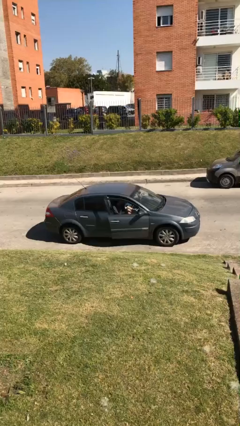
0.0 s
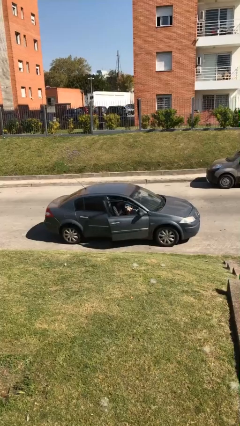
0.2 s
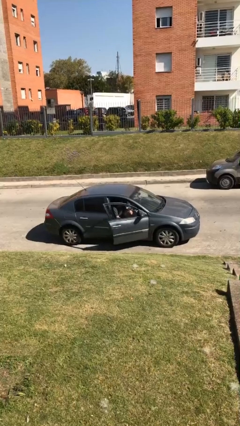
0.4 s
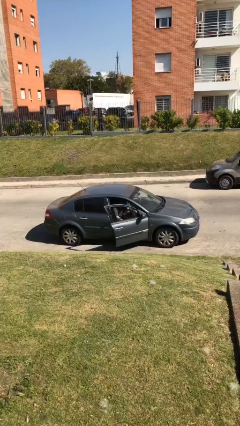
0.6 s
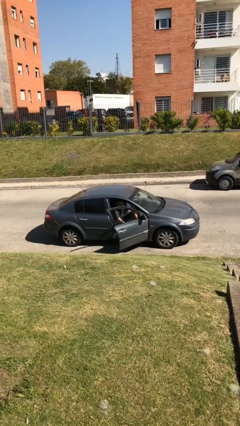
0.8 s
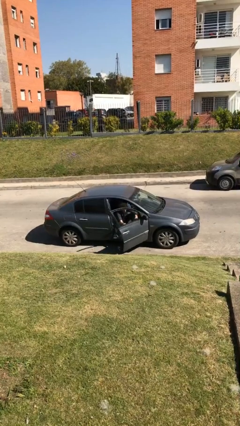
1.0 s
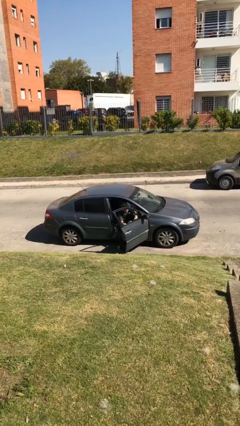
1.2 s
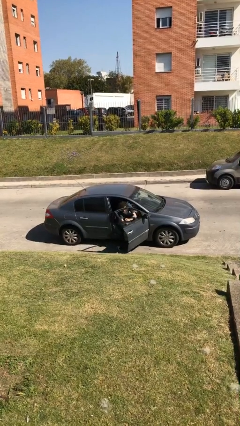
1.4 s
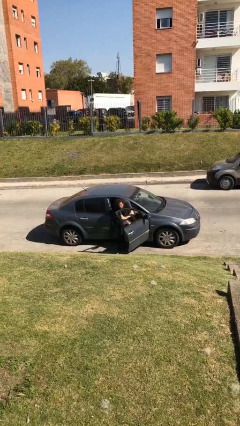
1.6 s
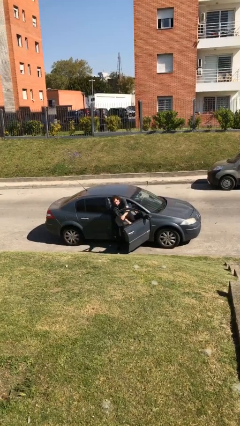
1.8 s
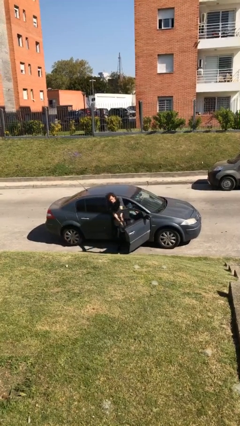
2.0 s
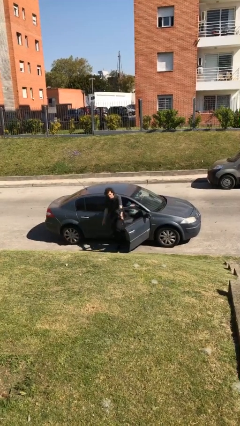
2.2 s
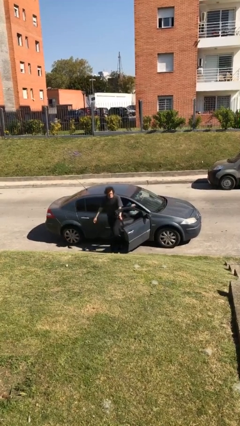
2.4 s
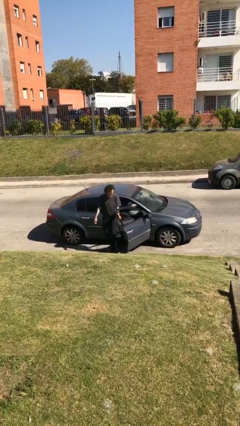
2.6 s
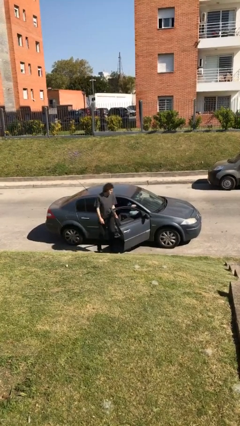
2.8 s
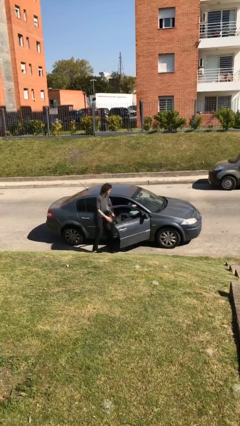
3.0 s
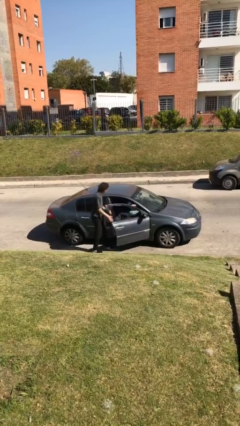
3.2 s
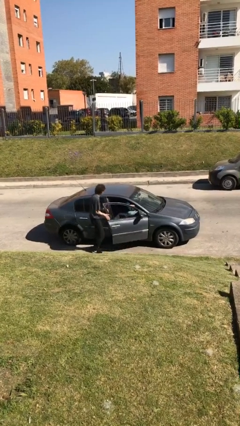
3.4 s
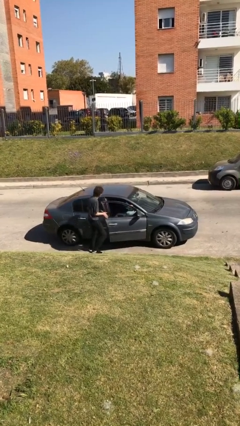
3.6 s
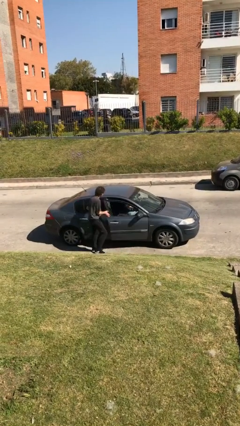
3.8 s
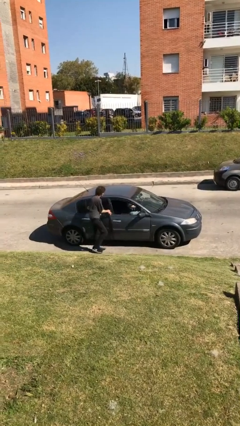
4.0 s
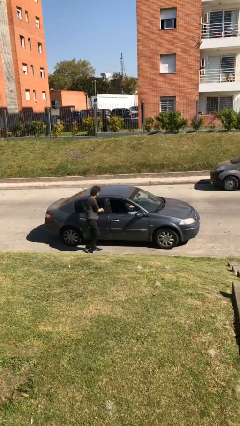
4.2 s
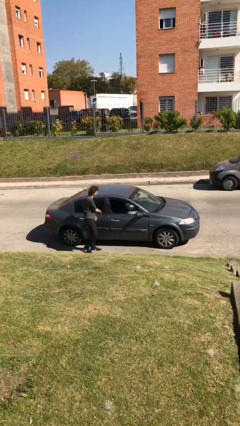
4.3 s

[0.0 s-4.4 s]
car drops off person

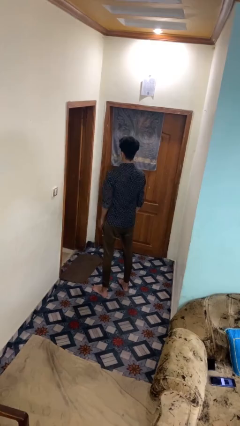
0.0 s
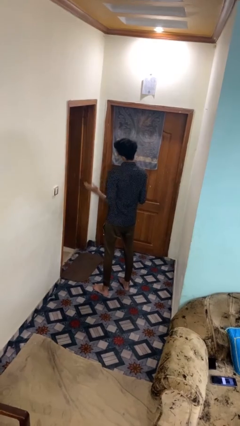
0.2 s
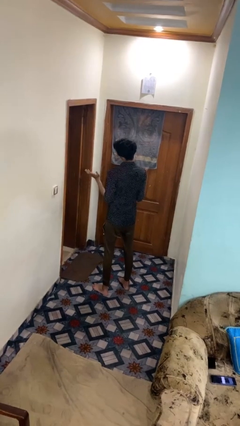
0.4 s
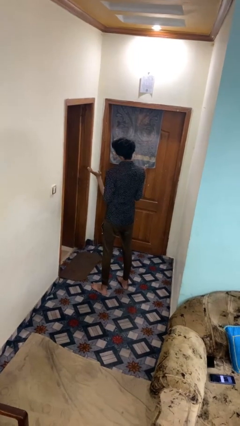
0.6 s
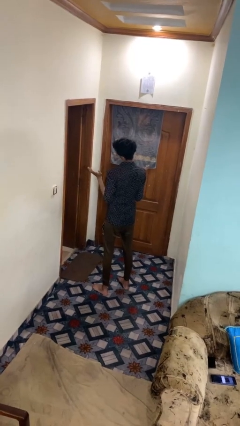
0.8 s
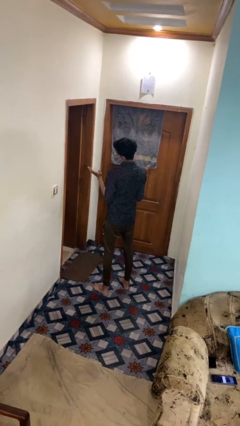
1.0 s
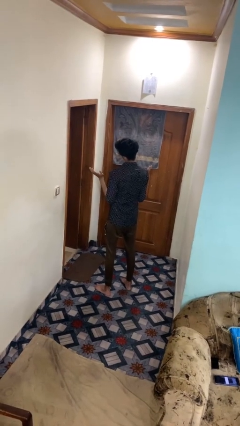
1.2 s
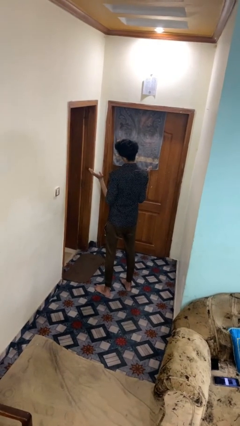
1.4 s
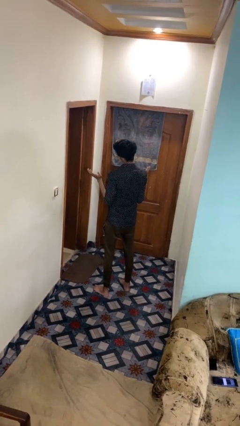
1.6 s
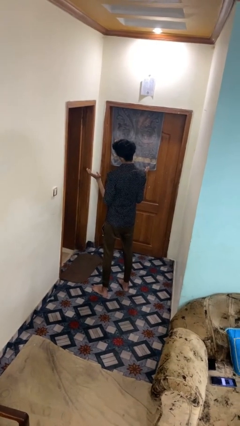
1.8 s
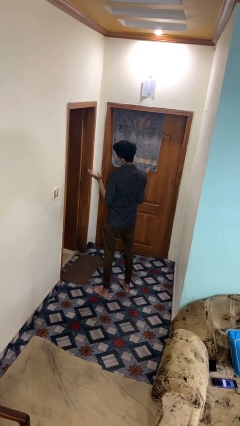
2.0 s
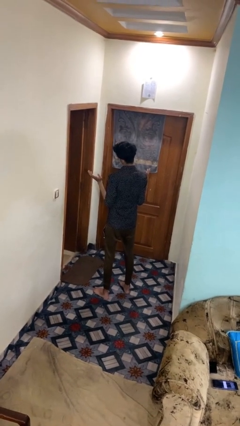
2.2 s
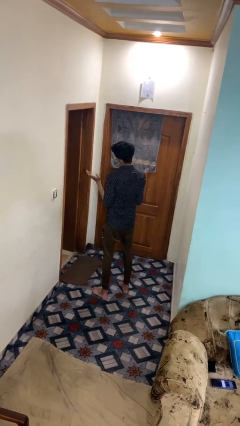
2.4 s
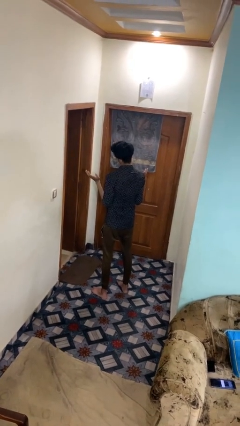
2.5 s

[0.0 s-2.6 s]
person shrugs

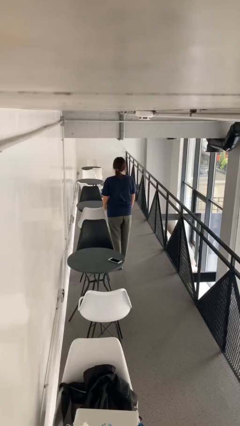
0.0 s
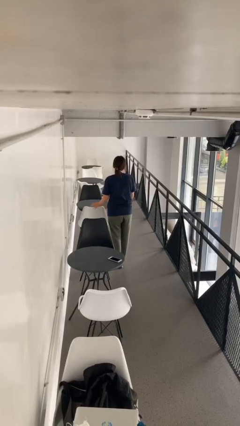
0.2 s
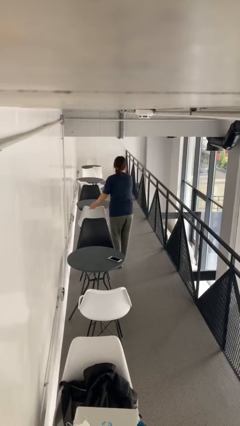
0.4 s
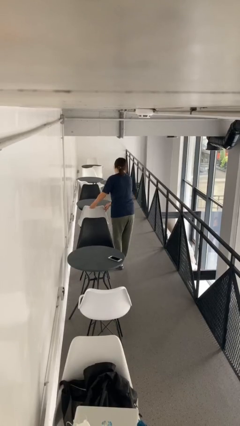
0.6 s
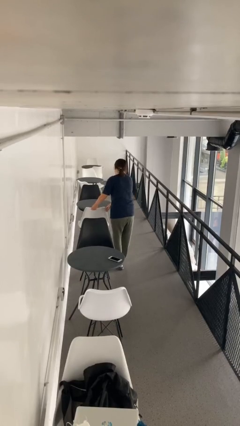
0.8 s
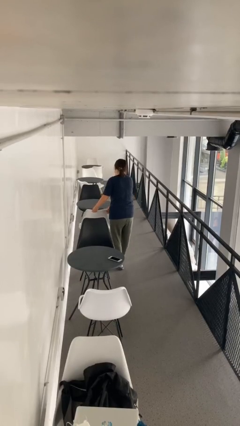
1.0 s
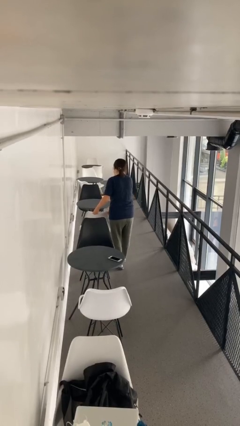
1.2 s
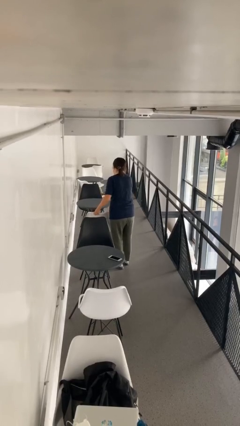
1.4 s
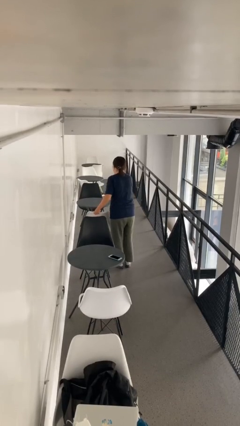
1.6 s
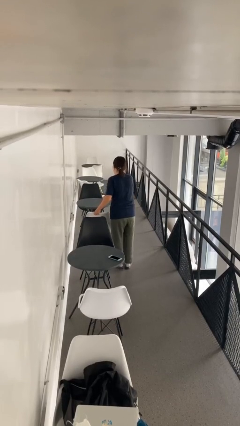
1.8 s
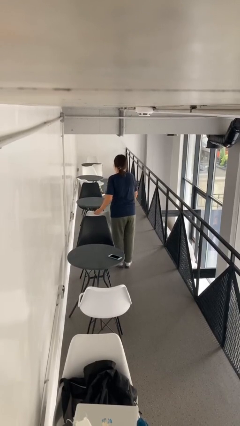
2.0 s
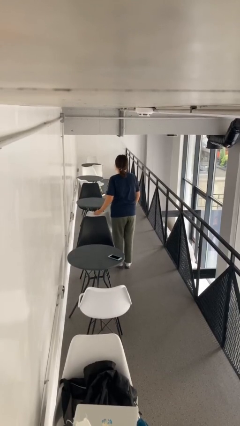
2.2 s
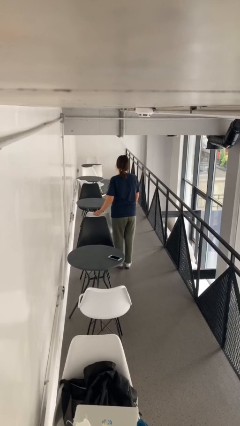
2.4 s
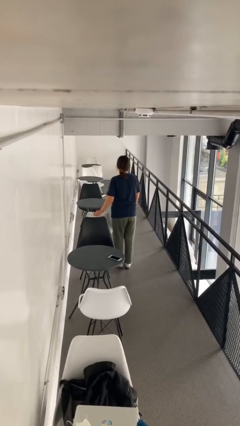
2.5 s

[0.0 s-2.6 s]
person pulls out chair

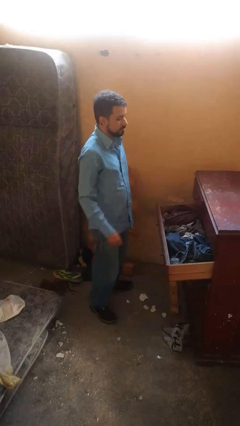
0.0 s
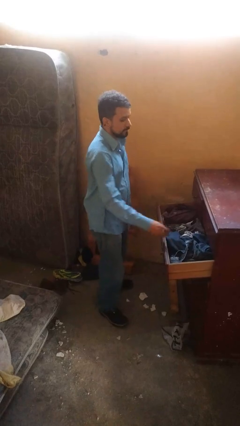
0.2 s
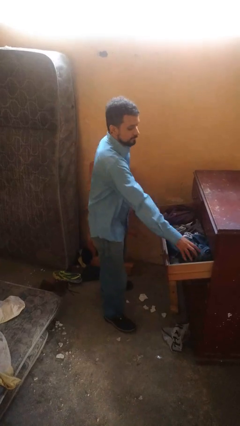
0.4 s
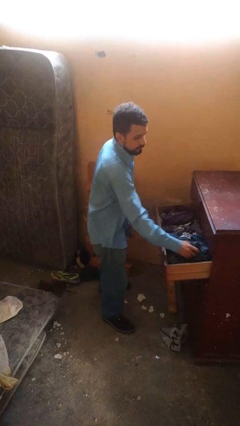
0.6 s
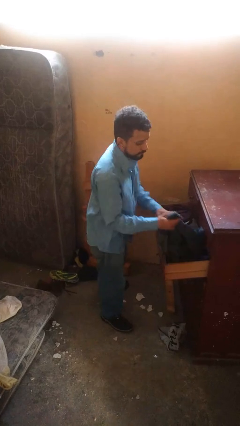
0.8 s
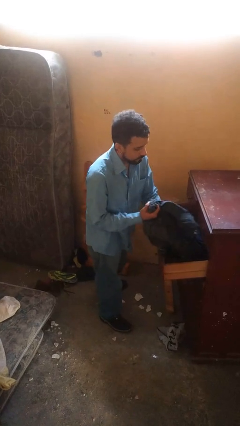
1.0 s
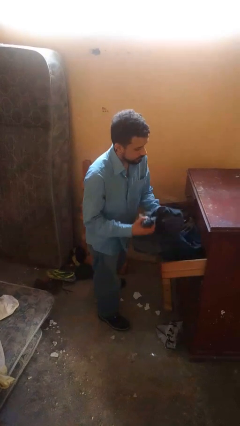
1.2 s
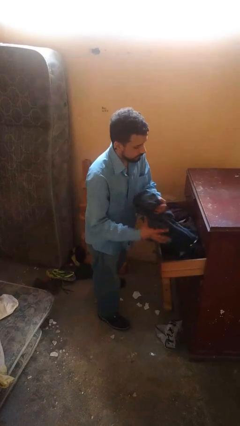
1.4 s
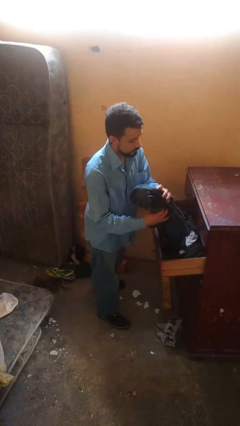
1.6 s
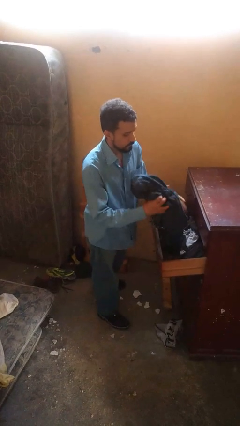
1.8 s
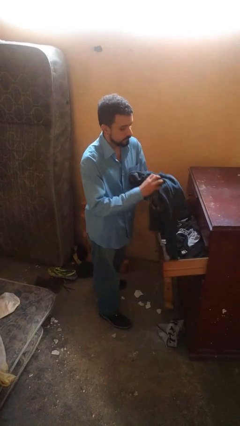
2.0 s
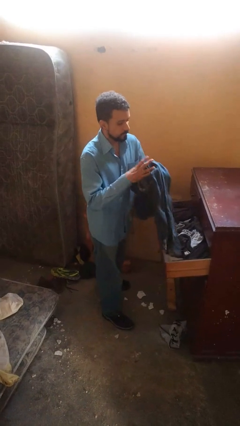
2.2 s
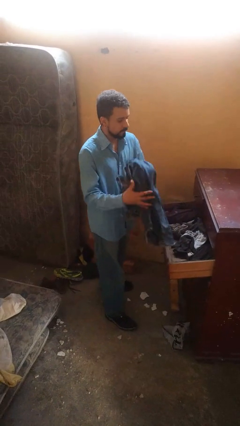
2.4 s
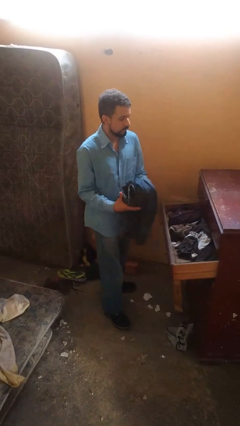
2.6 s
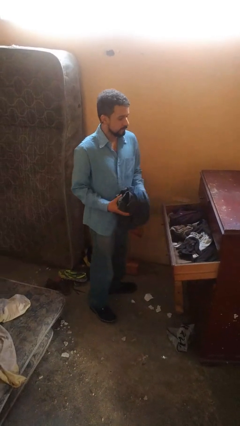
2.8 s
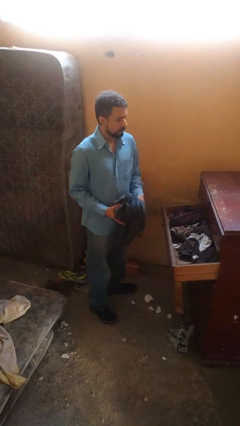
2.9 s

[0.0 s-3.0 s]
person takes clothes from dresser

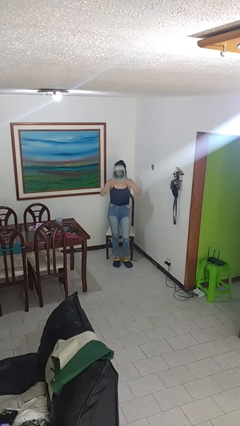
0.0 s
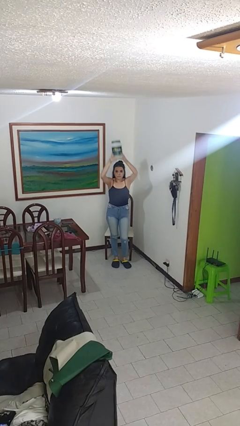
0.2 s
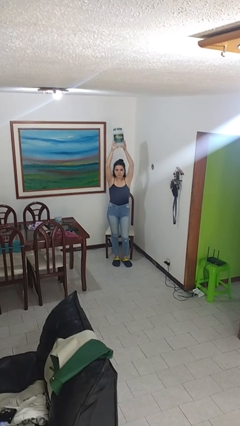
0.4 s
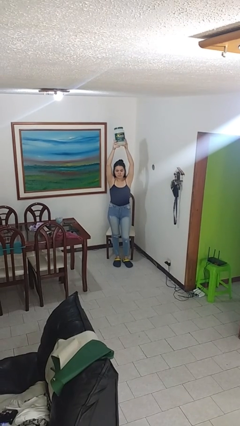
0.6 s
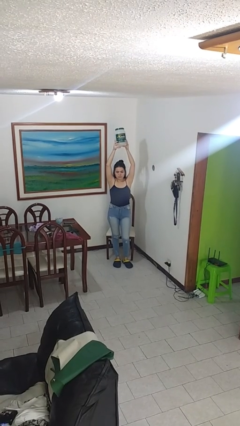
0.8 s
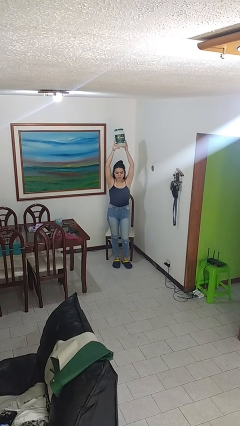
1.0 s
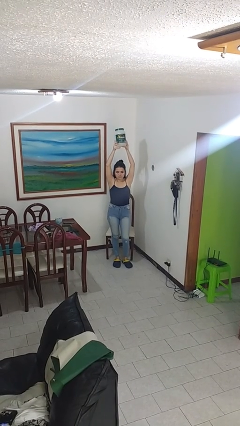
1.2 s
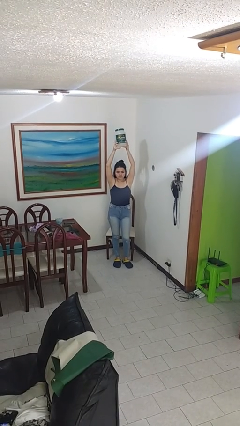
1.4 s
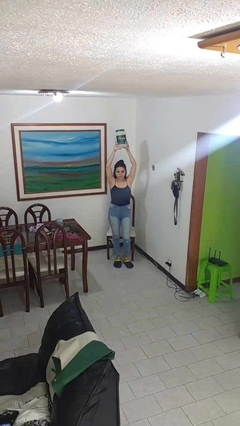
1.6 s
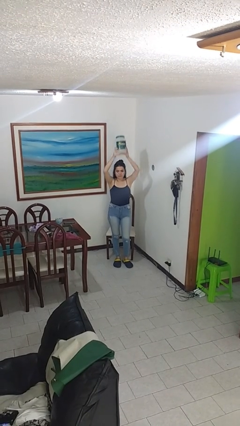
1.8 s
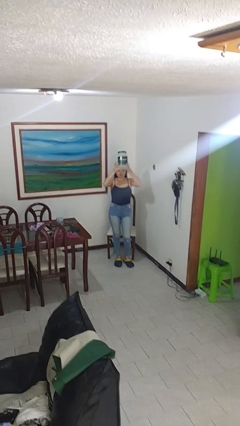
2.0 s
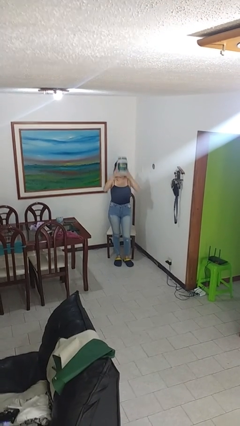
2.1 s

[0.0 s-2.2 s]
person holds object above head

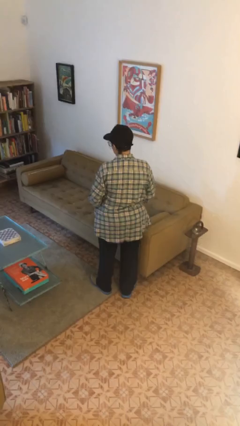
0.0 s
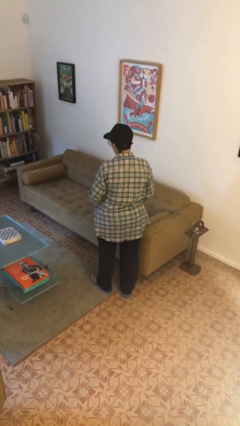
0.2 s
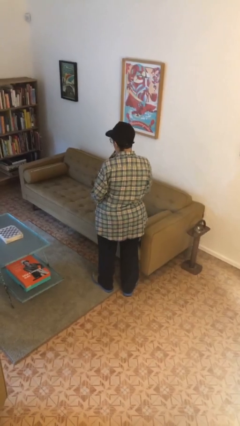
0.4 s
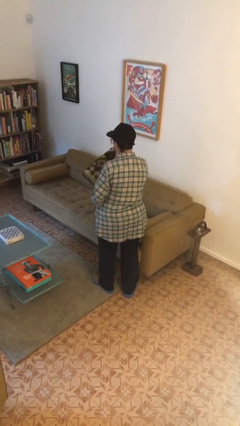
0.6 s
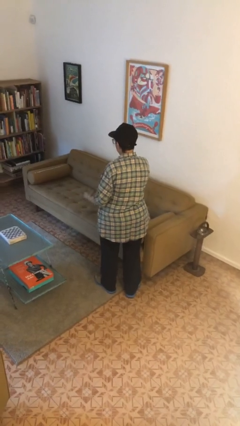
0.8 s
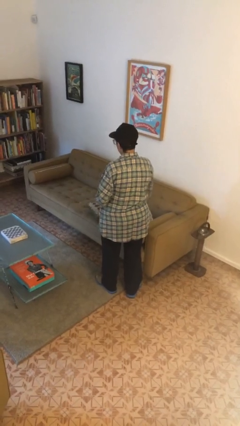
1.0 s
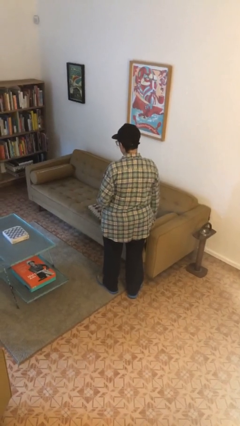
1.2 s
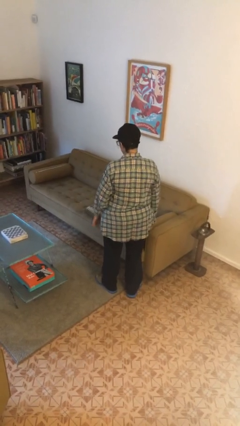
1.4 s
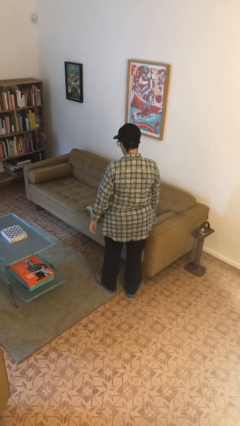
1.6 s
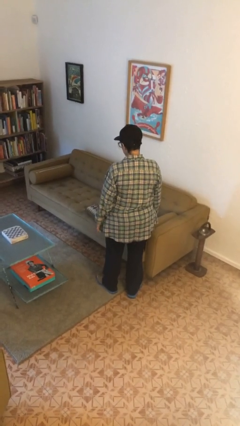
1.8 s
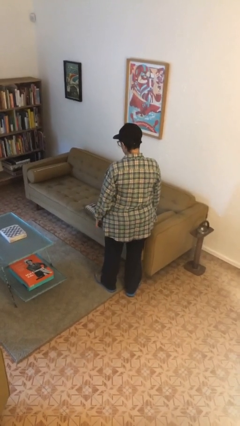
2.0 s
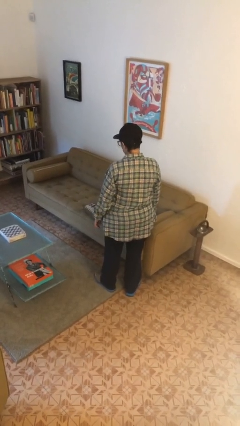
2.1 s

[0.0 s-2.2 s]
person puts down object on couch

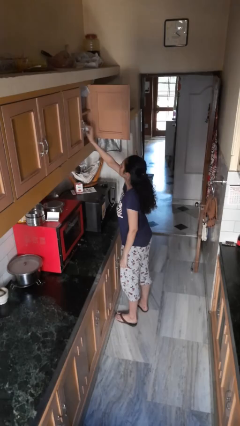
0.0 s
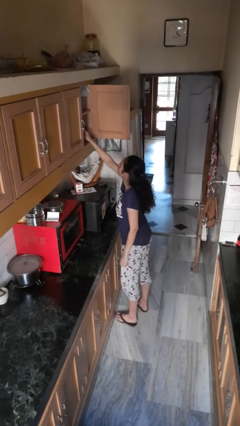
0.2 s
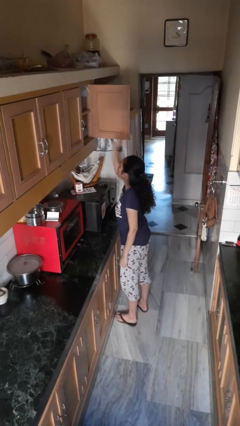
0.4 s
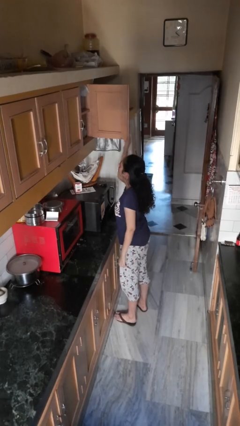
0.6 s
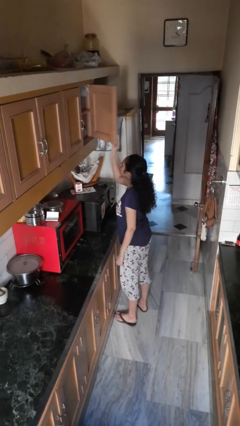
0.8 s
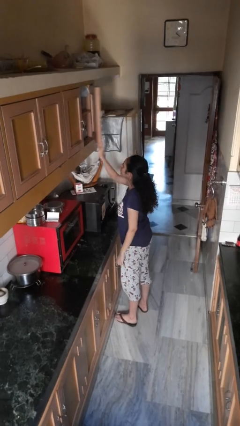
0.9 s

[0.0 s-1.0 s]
person puts object in cabinet
